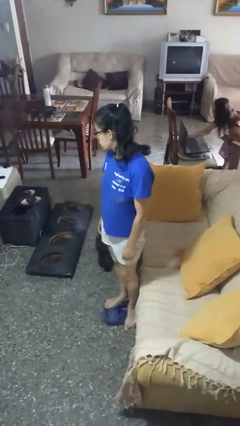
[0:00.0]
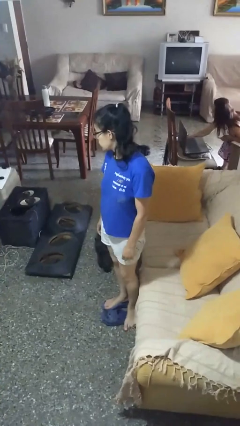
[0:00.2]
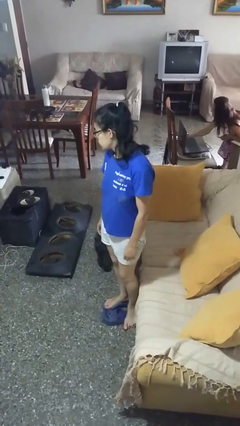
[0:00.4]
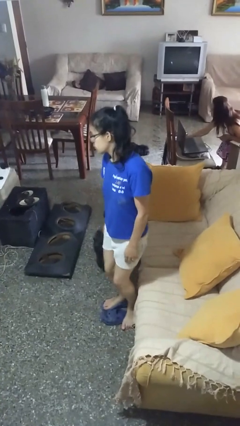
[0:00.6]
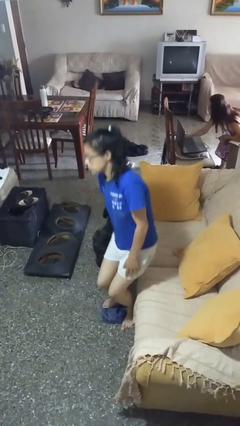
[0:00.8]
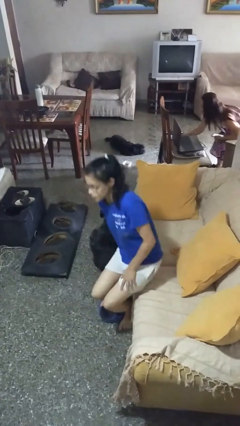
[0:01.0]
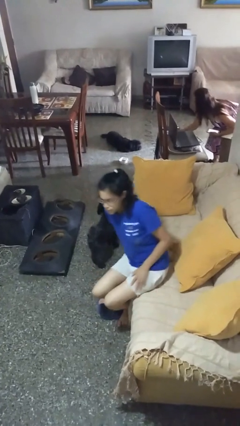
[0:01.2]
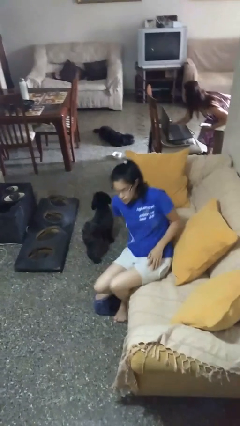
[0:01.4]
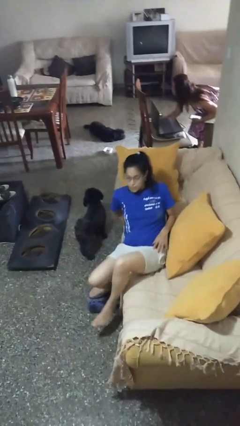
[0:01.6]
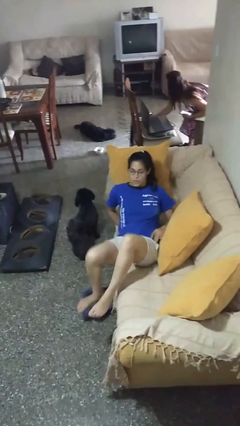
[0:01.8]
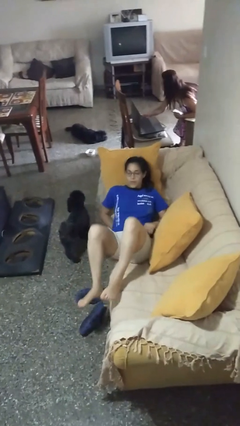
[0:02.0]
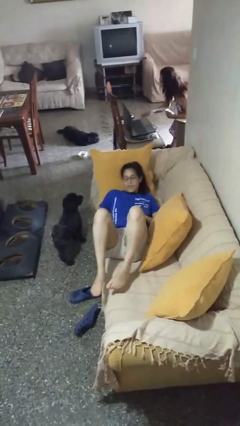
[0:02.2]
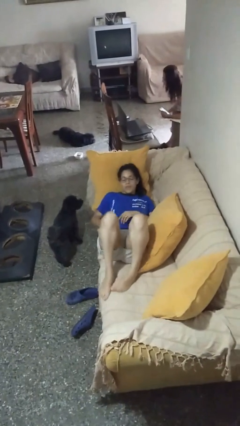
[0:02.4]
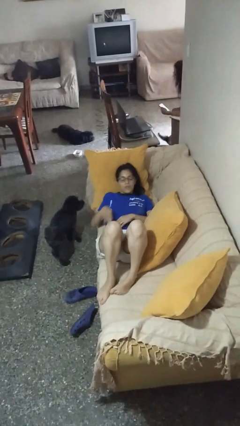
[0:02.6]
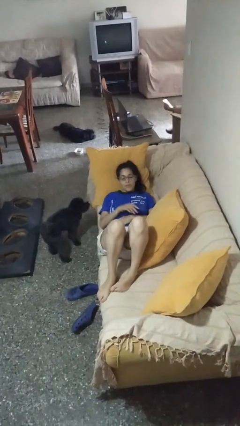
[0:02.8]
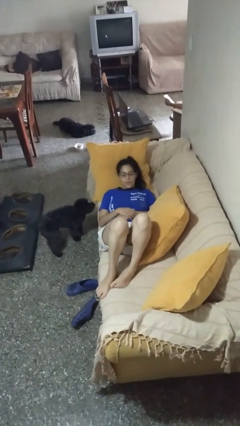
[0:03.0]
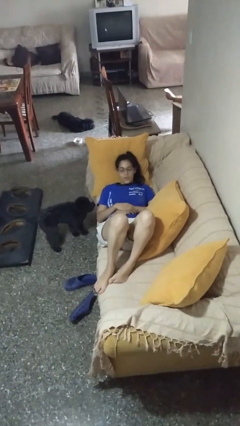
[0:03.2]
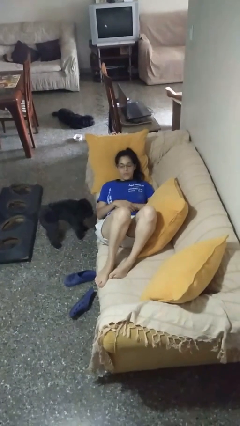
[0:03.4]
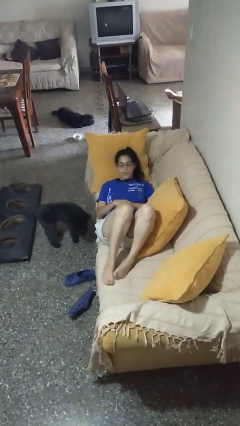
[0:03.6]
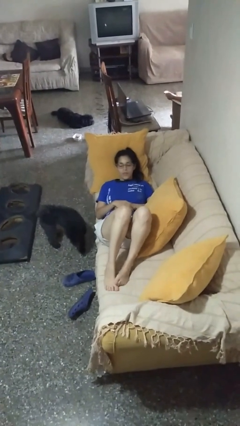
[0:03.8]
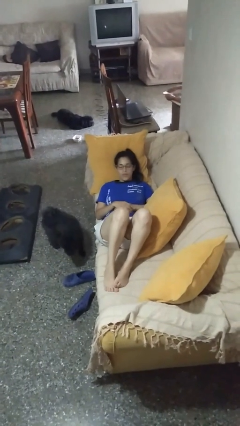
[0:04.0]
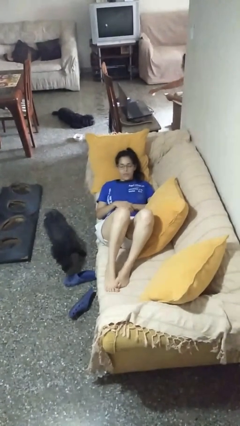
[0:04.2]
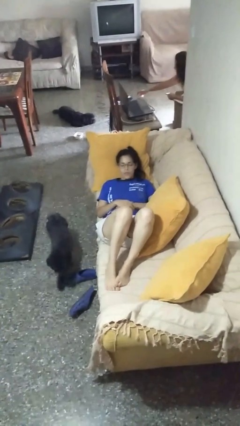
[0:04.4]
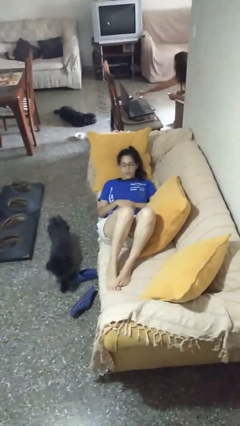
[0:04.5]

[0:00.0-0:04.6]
person lies down on couch

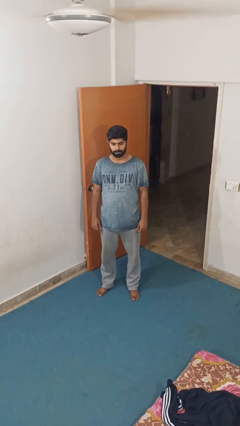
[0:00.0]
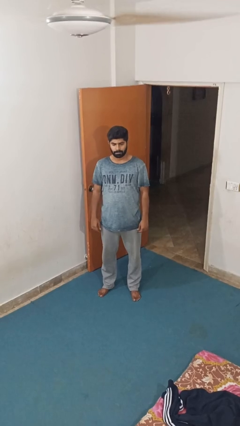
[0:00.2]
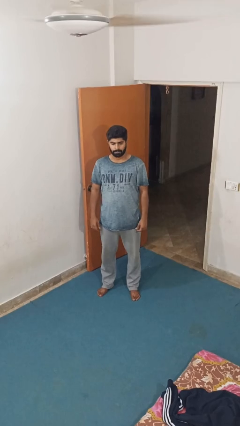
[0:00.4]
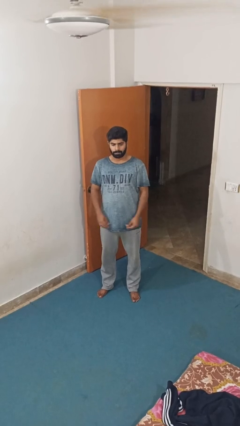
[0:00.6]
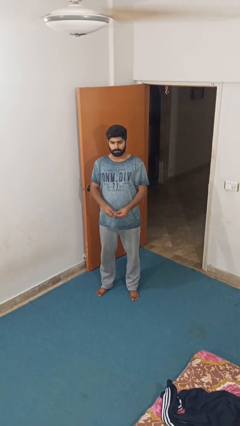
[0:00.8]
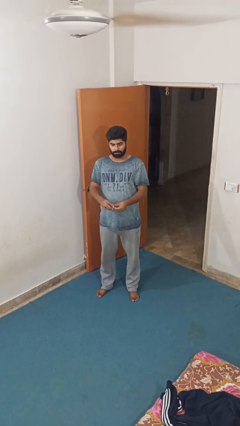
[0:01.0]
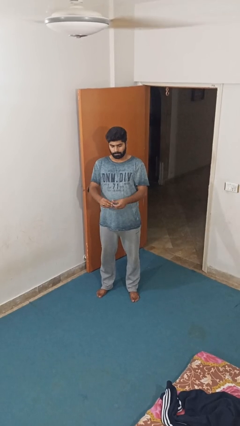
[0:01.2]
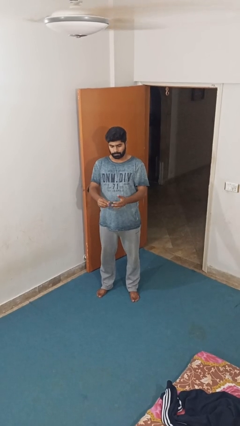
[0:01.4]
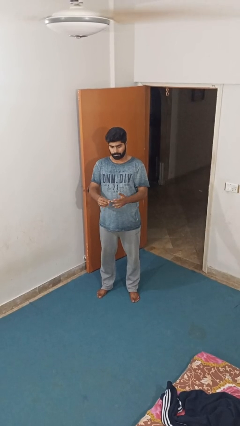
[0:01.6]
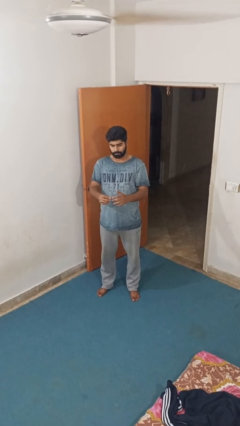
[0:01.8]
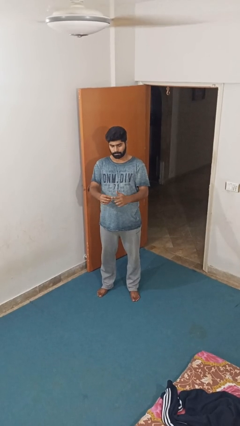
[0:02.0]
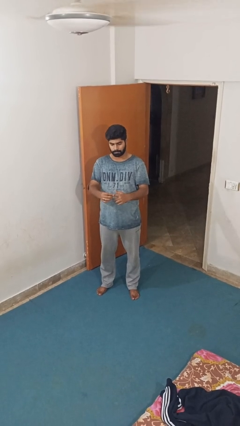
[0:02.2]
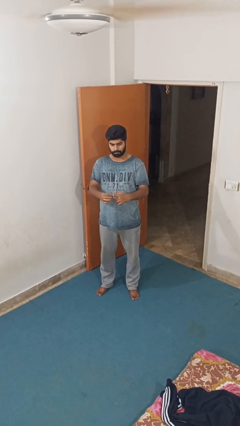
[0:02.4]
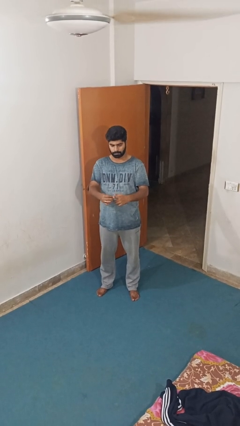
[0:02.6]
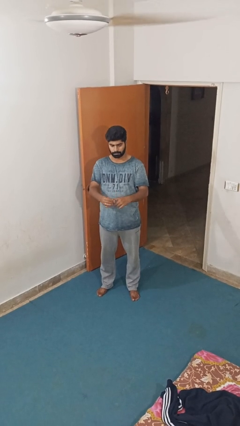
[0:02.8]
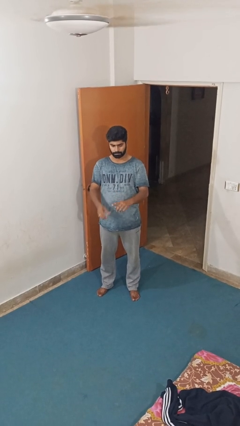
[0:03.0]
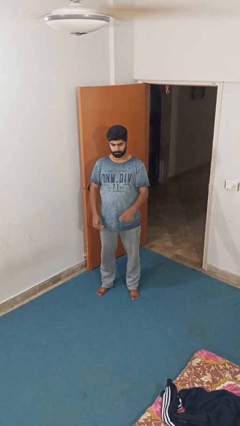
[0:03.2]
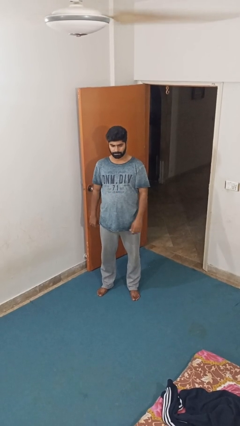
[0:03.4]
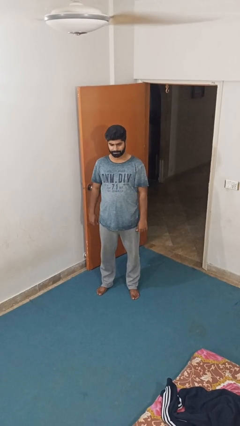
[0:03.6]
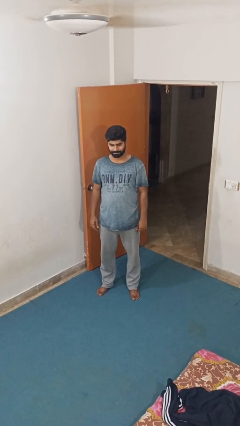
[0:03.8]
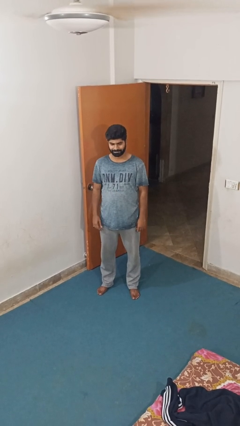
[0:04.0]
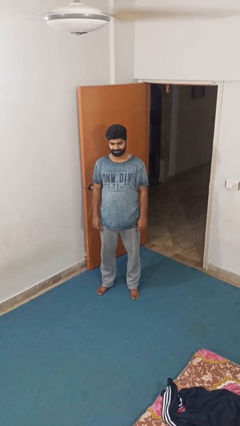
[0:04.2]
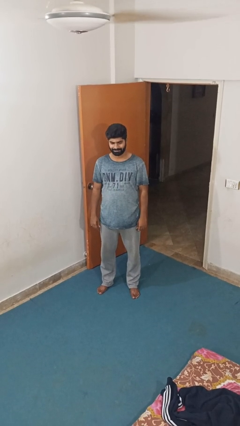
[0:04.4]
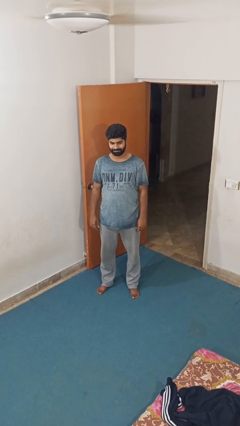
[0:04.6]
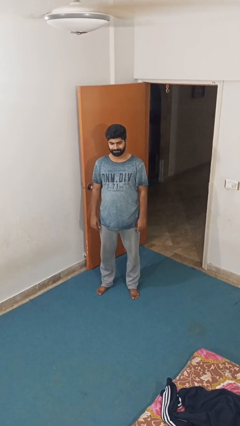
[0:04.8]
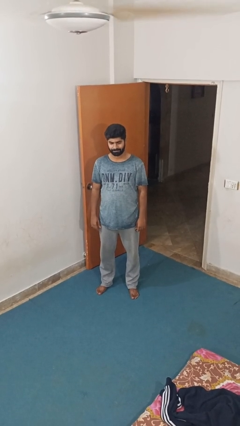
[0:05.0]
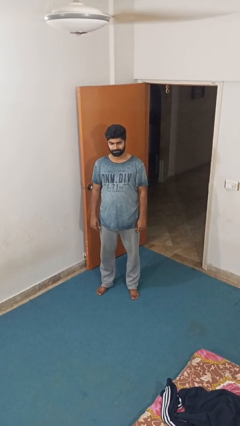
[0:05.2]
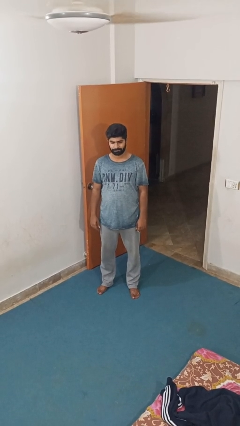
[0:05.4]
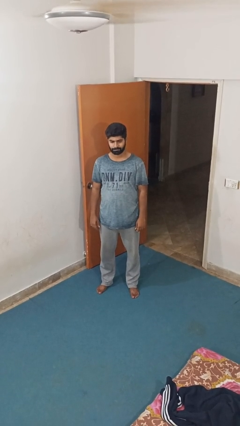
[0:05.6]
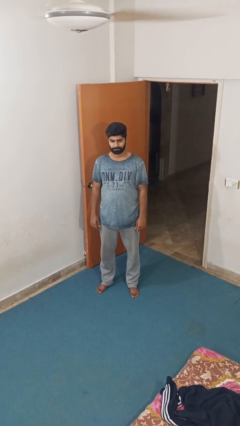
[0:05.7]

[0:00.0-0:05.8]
person puts on ring

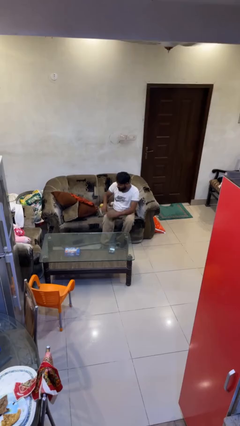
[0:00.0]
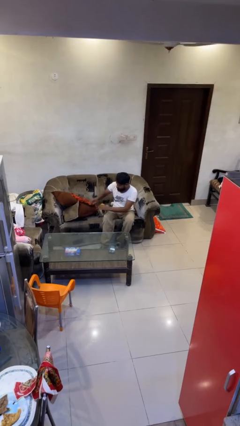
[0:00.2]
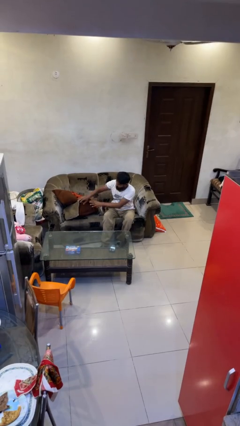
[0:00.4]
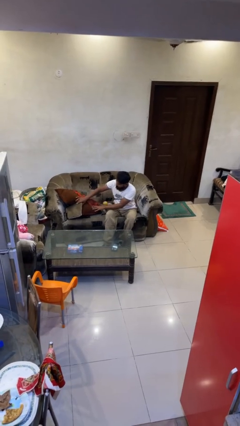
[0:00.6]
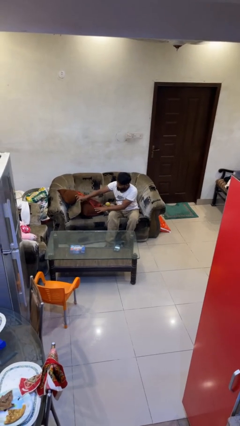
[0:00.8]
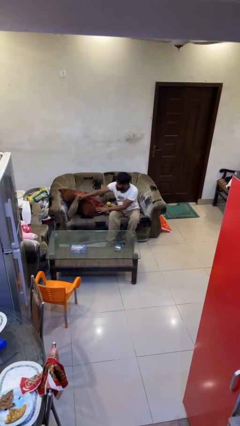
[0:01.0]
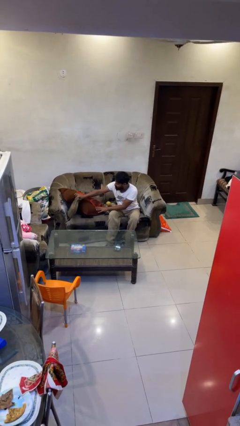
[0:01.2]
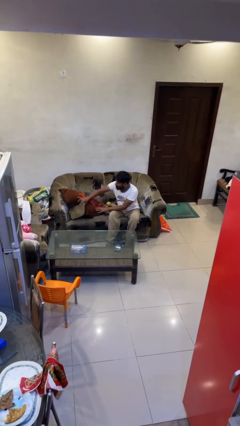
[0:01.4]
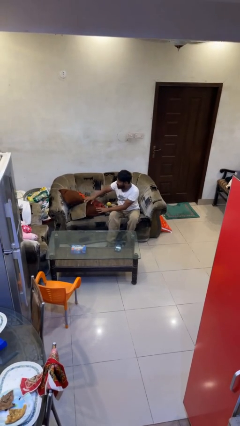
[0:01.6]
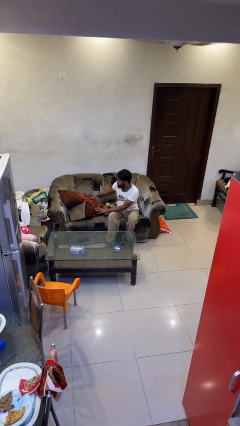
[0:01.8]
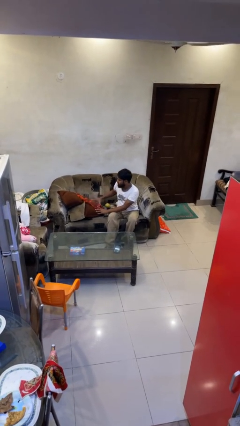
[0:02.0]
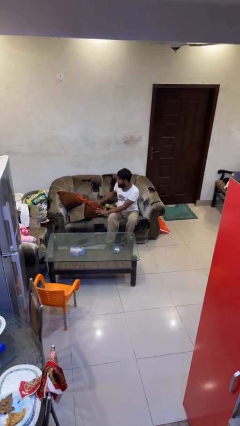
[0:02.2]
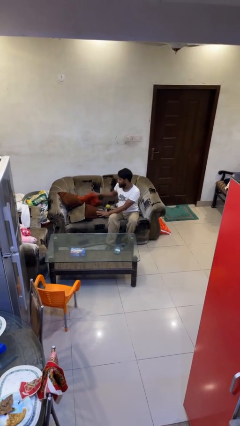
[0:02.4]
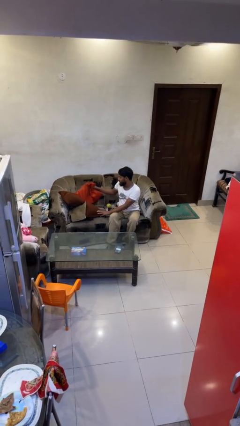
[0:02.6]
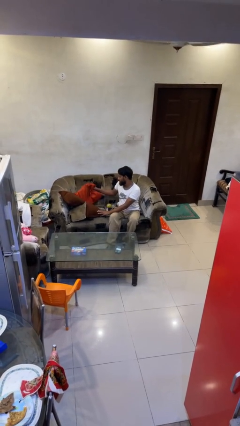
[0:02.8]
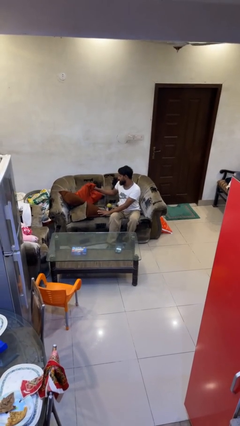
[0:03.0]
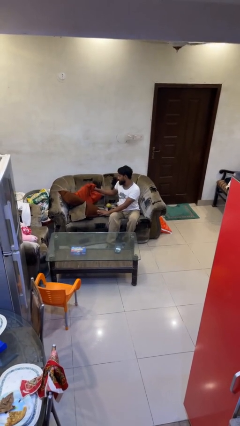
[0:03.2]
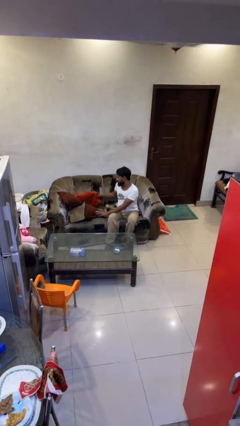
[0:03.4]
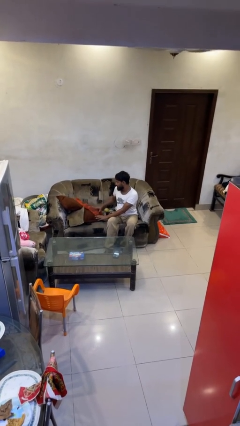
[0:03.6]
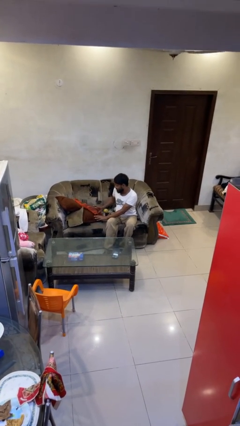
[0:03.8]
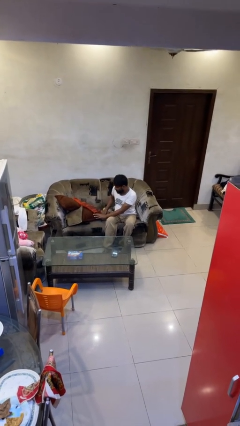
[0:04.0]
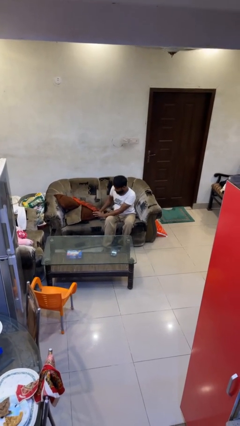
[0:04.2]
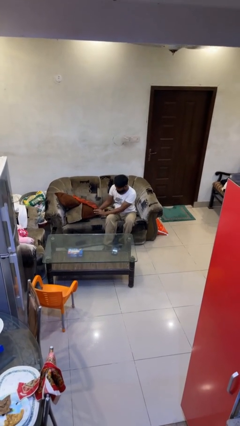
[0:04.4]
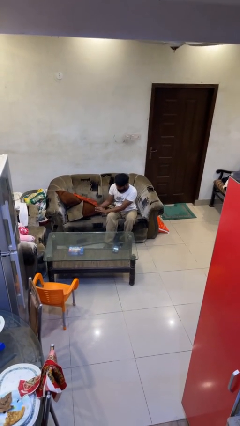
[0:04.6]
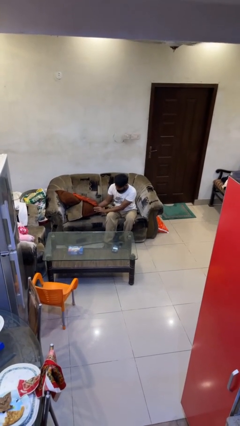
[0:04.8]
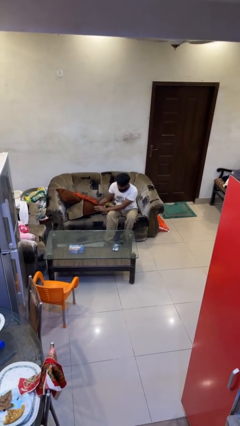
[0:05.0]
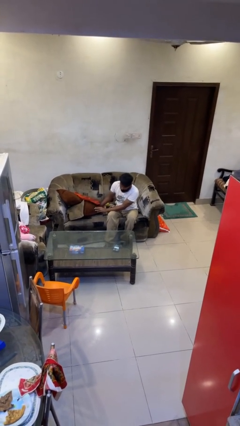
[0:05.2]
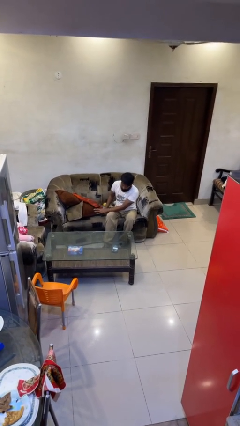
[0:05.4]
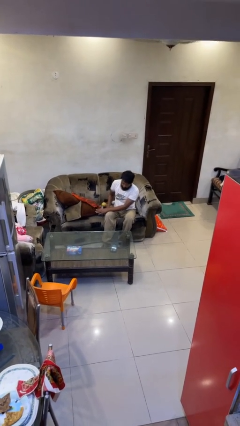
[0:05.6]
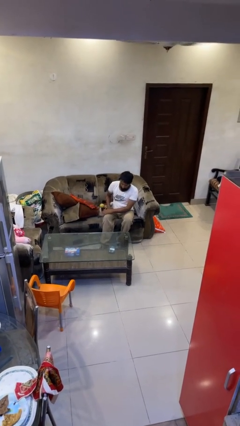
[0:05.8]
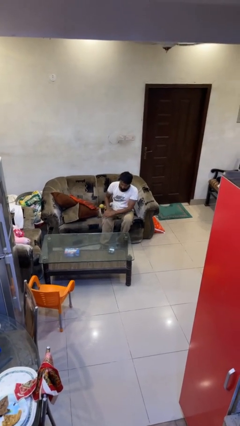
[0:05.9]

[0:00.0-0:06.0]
person searches in couch

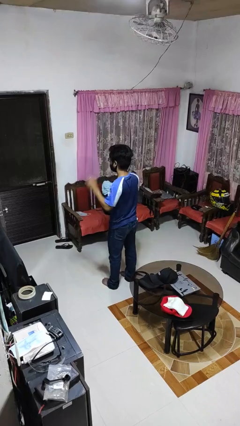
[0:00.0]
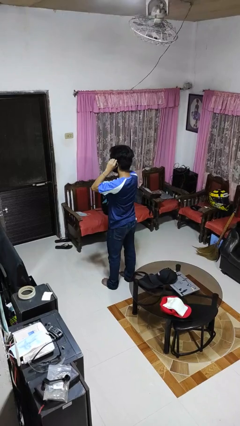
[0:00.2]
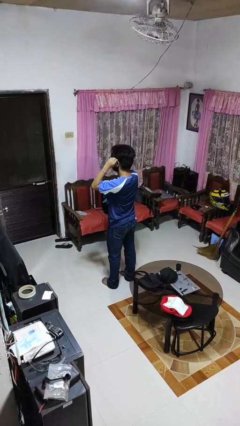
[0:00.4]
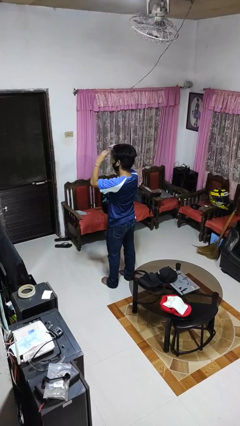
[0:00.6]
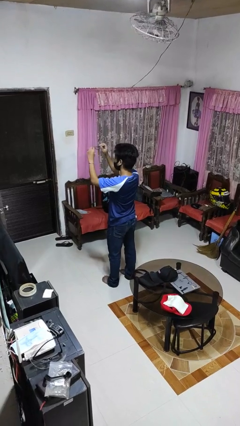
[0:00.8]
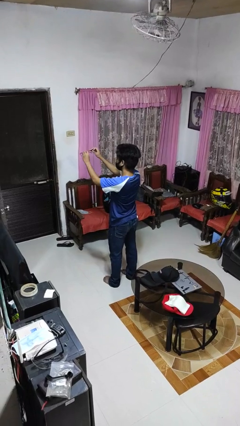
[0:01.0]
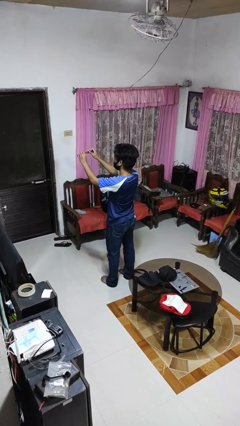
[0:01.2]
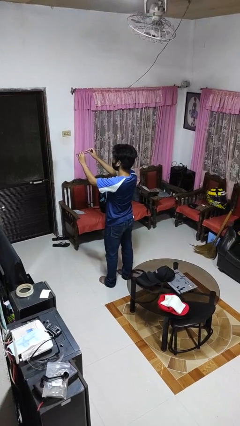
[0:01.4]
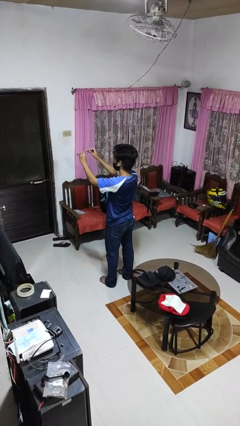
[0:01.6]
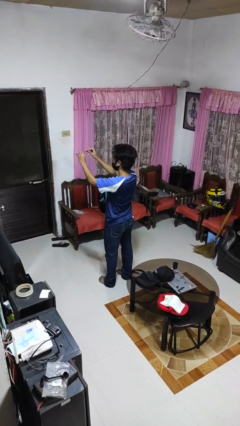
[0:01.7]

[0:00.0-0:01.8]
person takes off glasses
